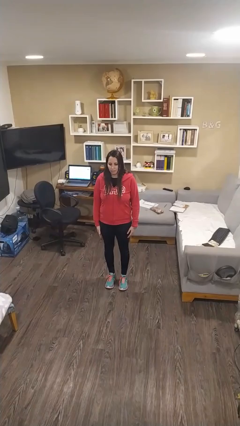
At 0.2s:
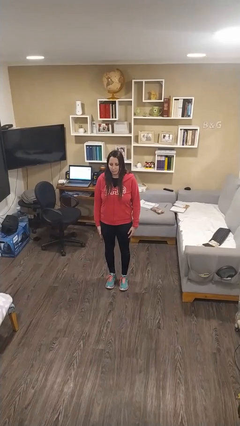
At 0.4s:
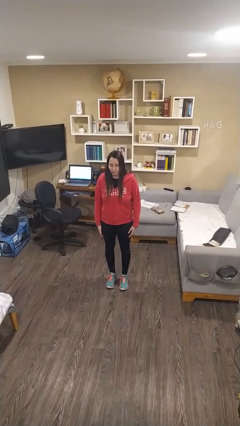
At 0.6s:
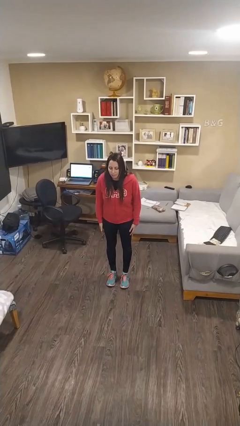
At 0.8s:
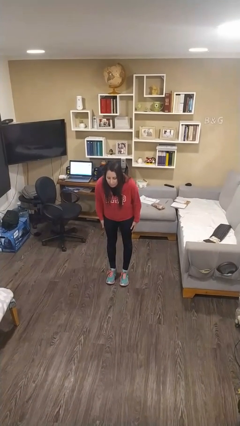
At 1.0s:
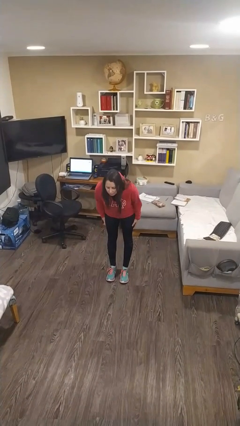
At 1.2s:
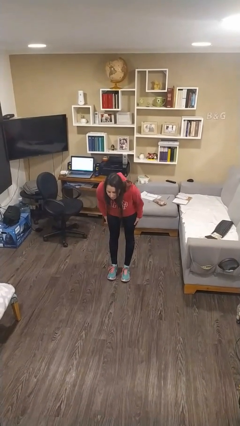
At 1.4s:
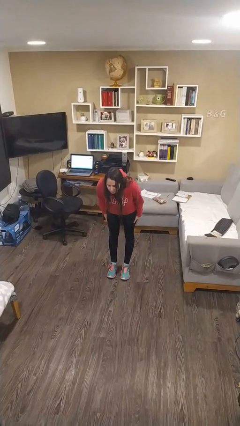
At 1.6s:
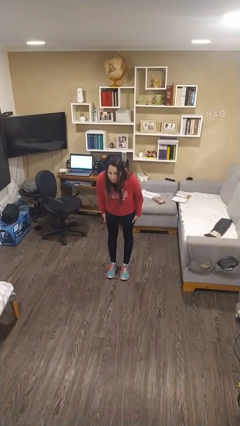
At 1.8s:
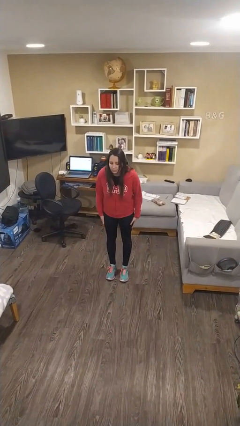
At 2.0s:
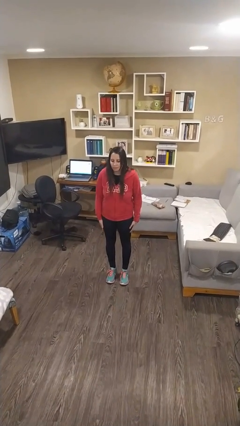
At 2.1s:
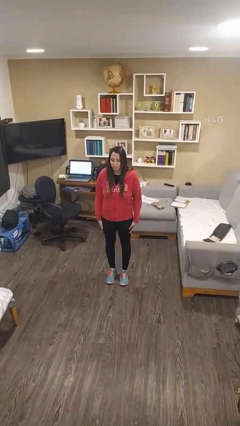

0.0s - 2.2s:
person bows

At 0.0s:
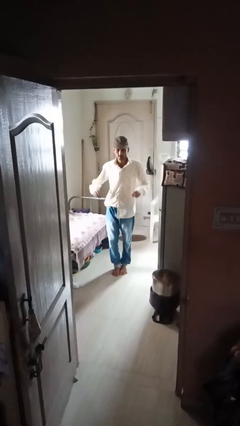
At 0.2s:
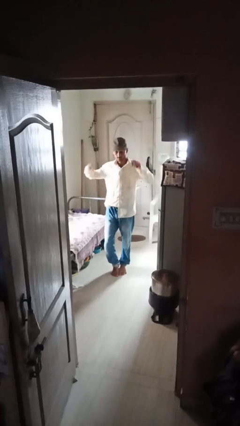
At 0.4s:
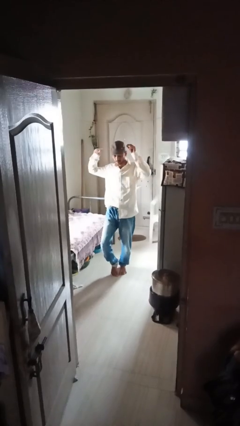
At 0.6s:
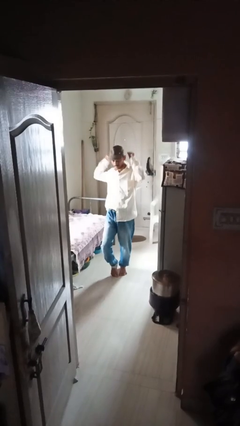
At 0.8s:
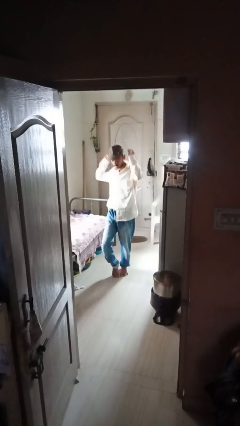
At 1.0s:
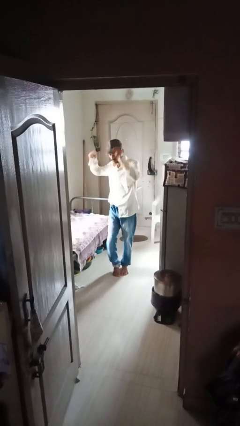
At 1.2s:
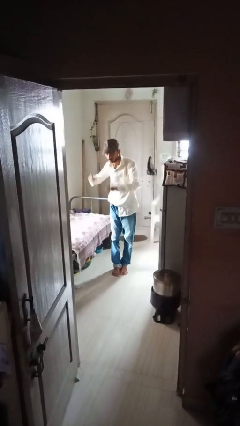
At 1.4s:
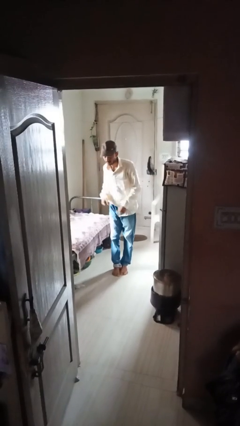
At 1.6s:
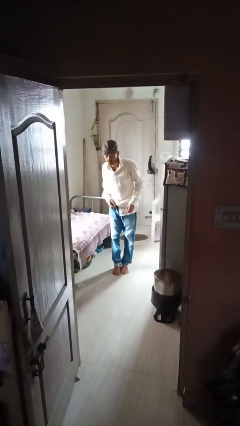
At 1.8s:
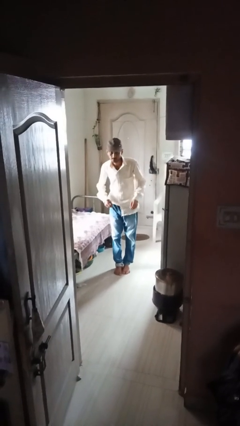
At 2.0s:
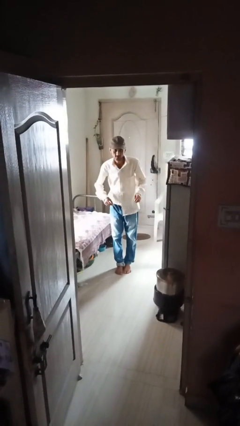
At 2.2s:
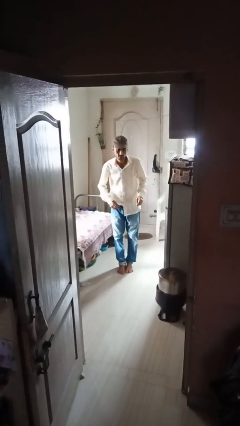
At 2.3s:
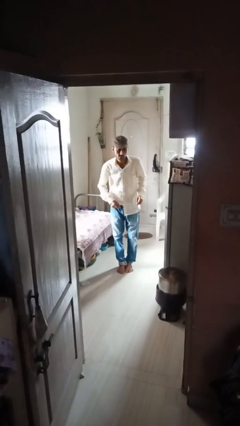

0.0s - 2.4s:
person dances in place

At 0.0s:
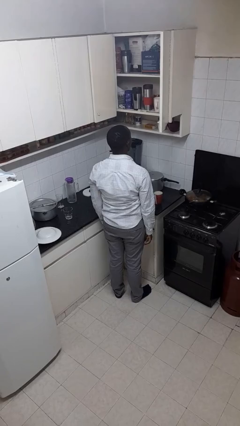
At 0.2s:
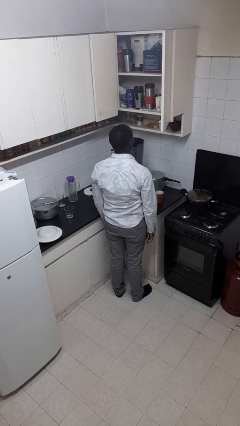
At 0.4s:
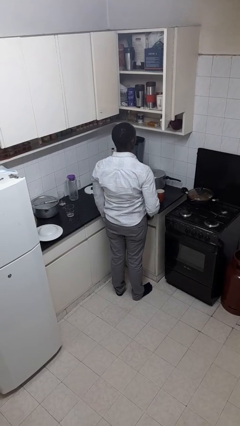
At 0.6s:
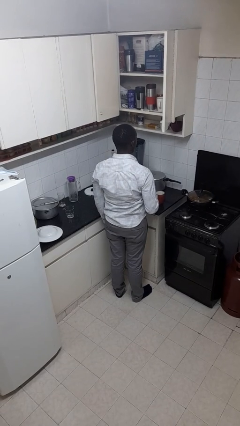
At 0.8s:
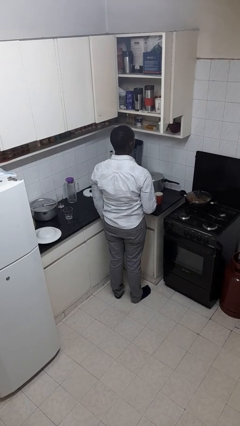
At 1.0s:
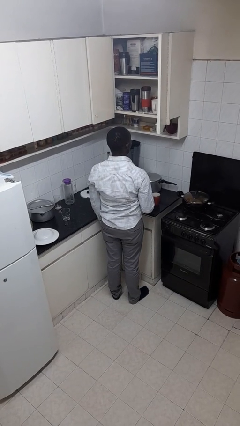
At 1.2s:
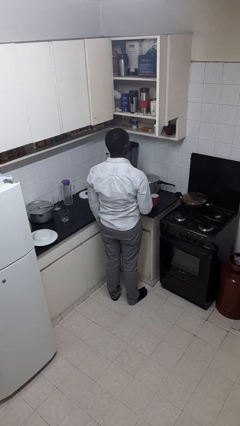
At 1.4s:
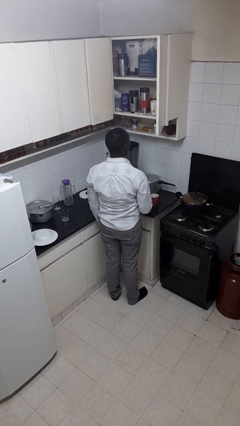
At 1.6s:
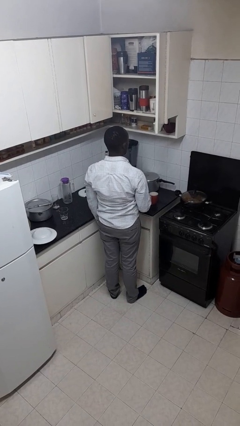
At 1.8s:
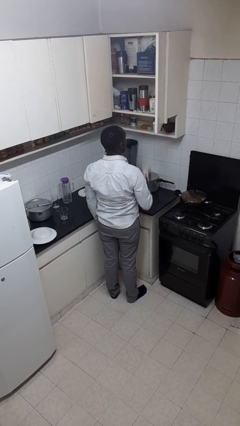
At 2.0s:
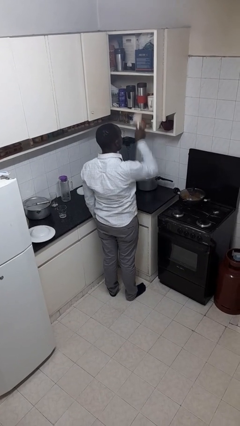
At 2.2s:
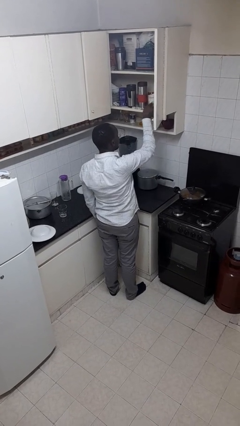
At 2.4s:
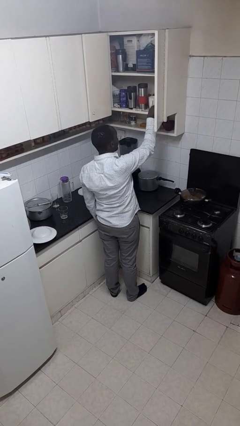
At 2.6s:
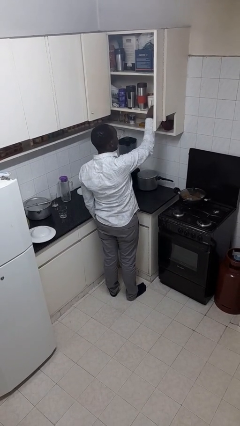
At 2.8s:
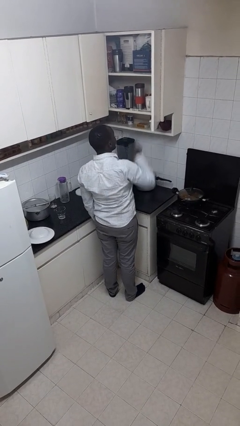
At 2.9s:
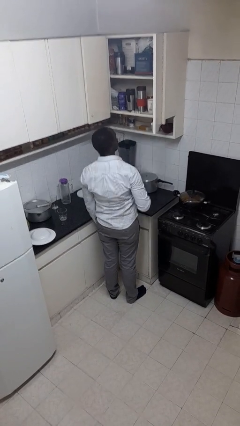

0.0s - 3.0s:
person puts object in cabinet

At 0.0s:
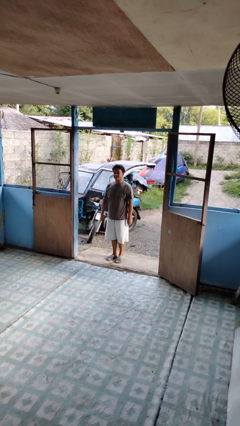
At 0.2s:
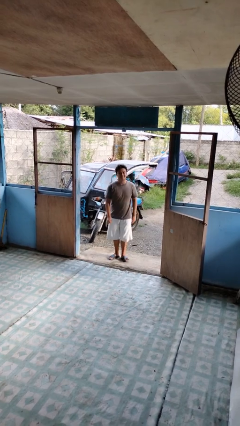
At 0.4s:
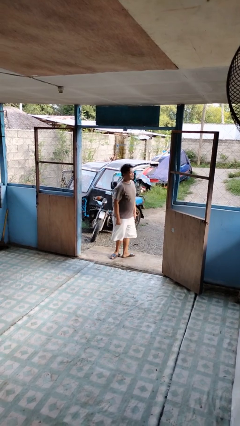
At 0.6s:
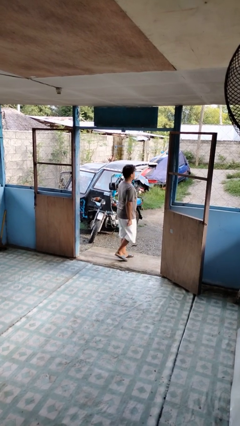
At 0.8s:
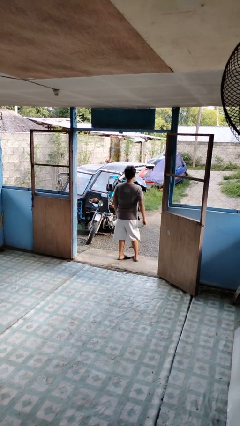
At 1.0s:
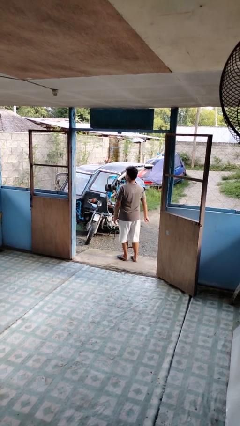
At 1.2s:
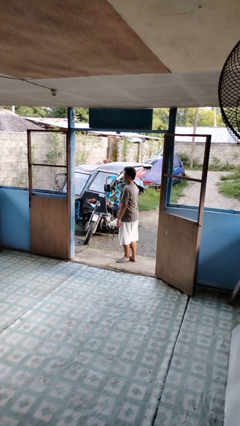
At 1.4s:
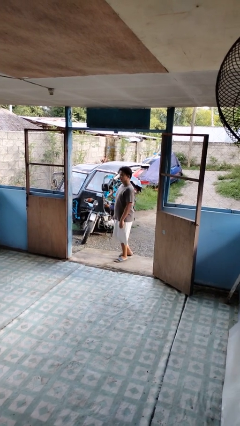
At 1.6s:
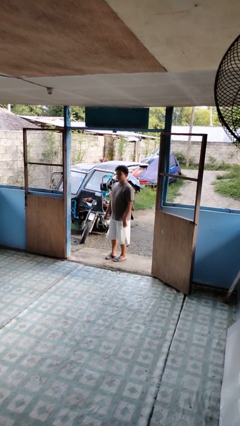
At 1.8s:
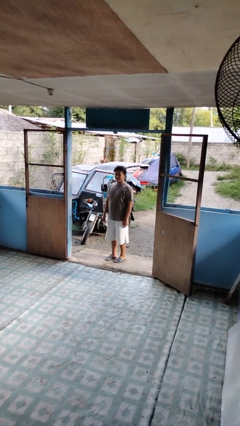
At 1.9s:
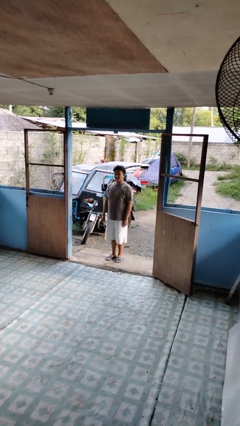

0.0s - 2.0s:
person twirls

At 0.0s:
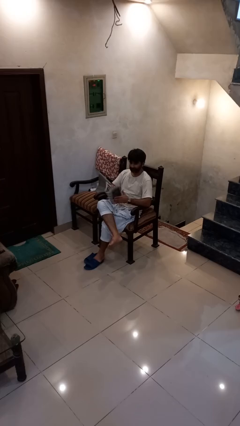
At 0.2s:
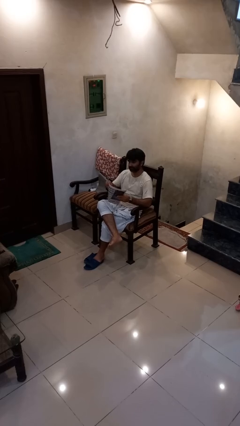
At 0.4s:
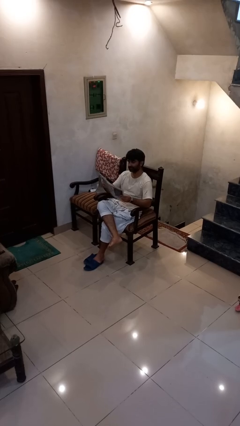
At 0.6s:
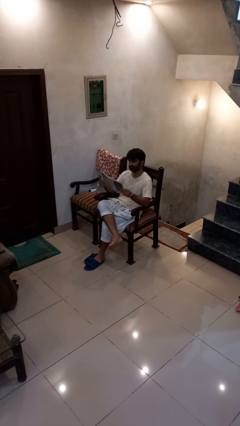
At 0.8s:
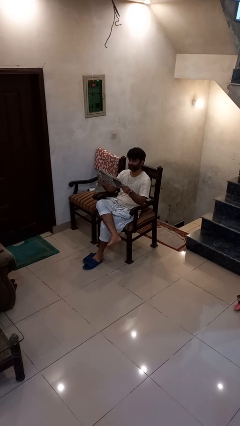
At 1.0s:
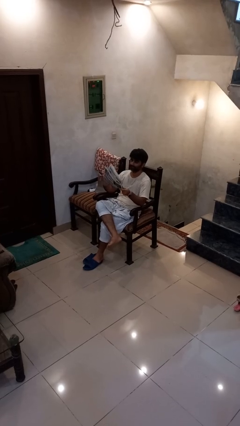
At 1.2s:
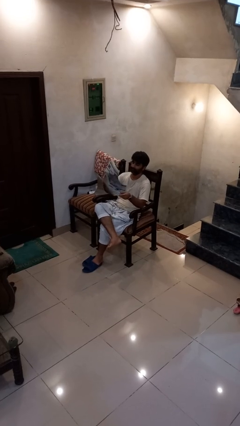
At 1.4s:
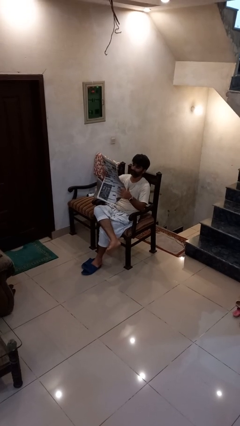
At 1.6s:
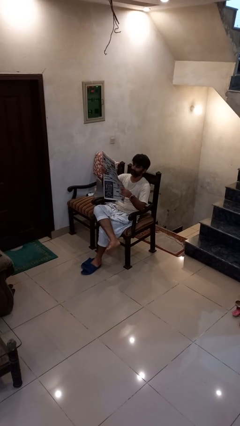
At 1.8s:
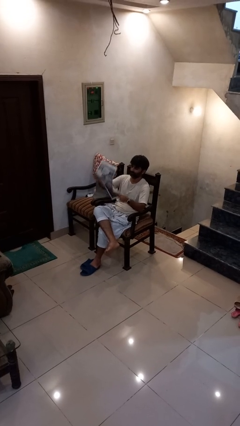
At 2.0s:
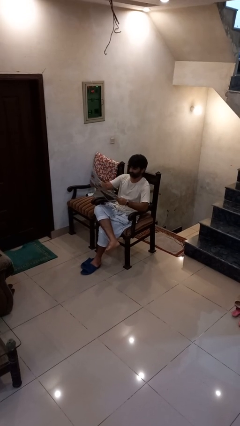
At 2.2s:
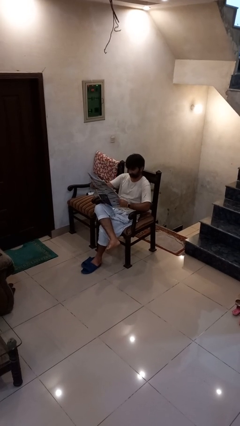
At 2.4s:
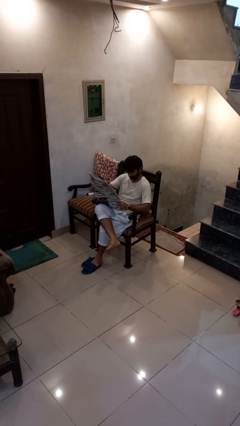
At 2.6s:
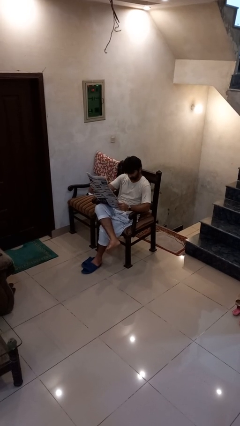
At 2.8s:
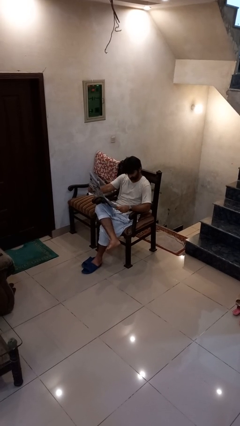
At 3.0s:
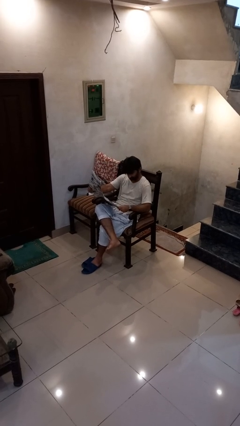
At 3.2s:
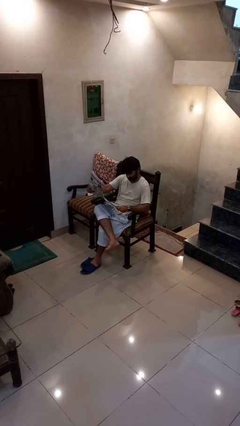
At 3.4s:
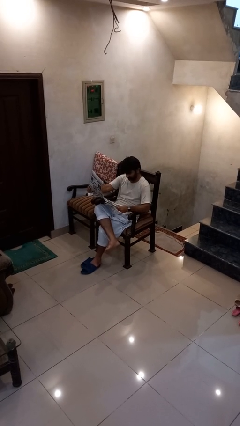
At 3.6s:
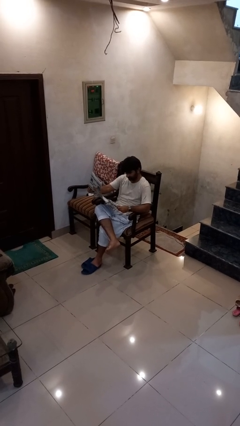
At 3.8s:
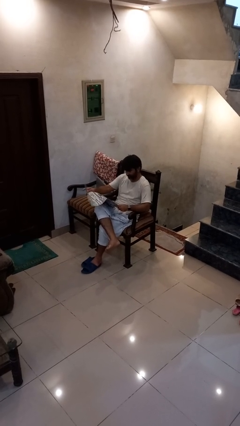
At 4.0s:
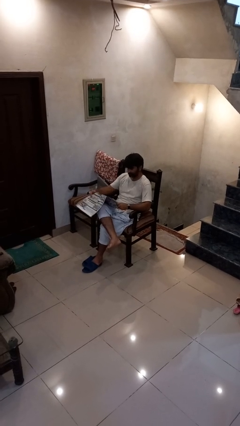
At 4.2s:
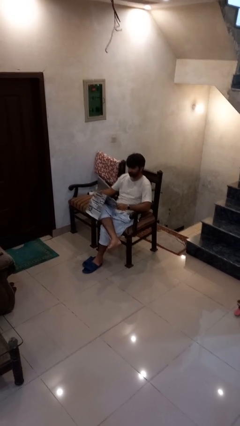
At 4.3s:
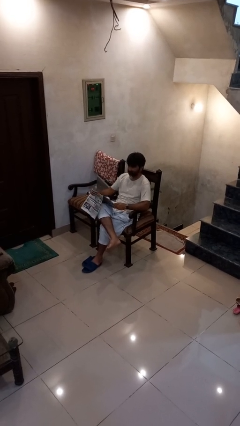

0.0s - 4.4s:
person reads newspaper

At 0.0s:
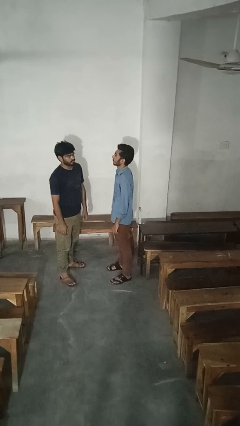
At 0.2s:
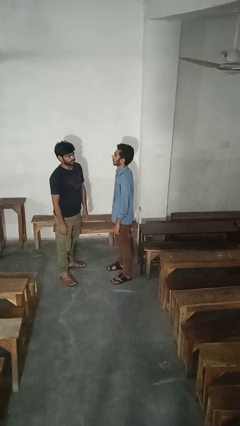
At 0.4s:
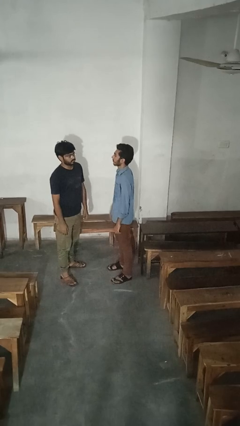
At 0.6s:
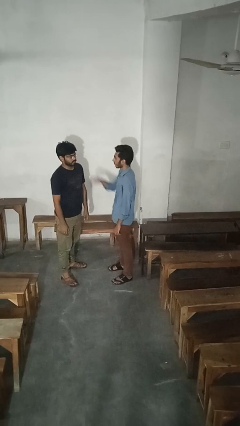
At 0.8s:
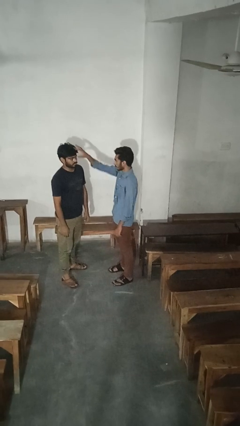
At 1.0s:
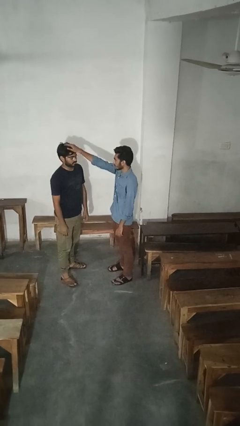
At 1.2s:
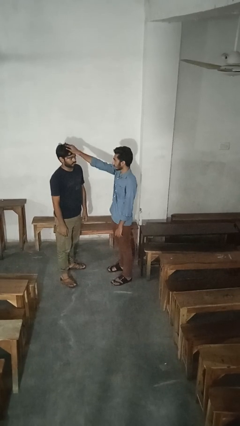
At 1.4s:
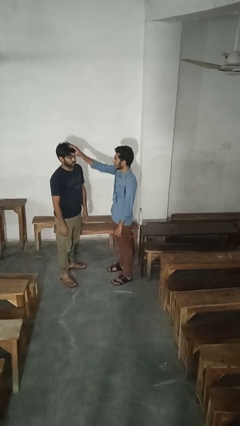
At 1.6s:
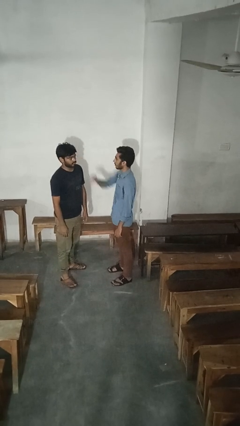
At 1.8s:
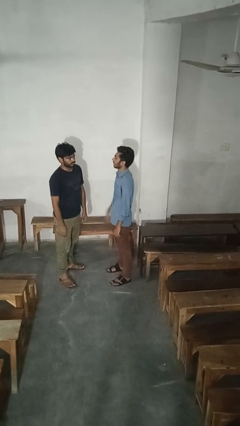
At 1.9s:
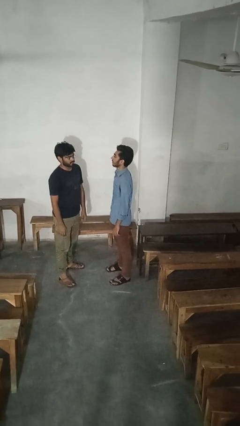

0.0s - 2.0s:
person grabs person by hair

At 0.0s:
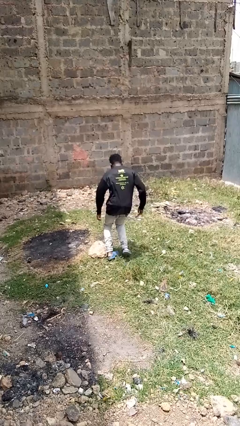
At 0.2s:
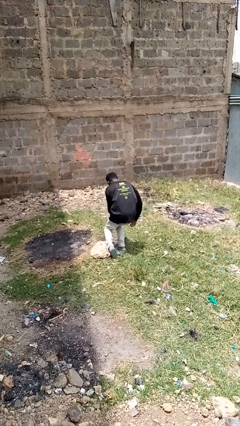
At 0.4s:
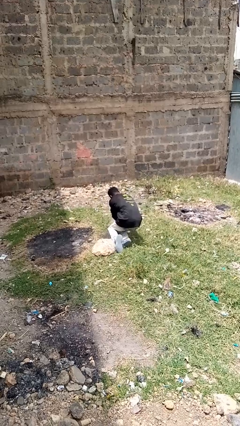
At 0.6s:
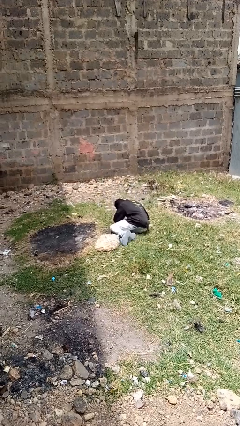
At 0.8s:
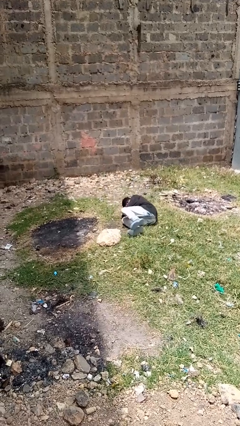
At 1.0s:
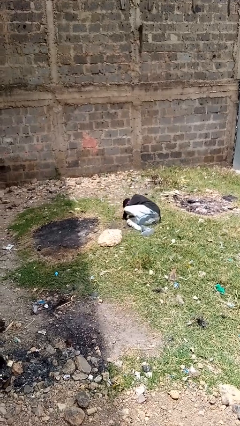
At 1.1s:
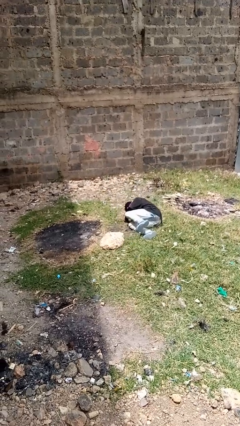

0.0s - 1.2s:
person trips on object on floor
